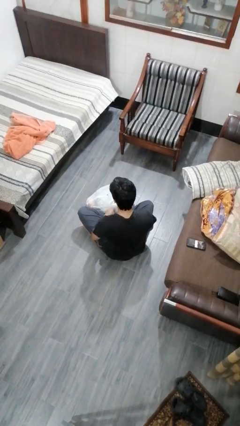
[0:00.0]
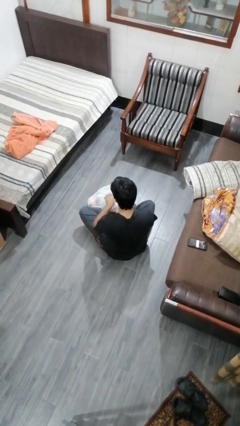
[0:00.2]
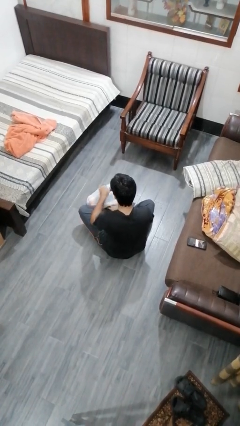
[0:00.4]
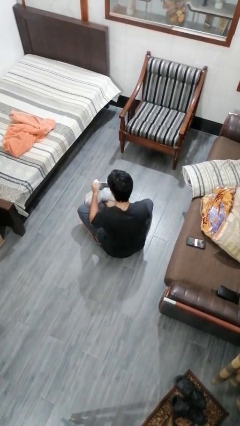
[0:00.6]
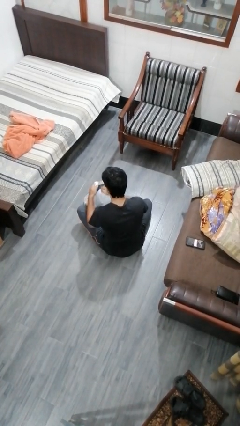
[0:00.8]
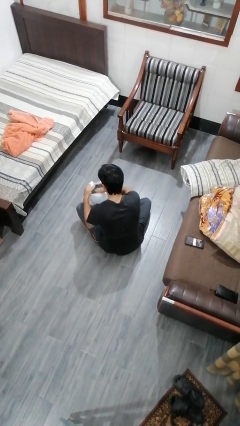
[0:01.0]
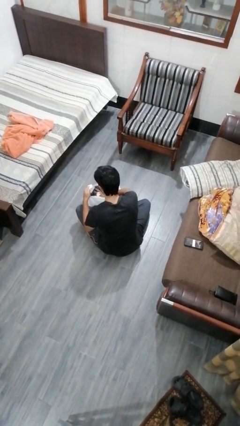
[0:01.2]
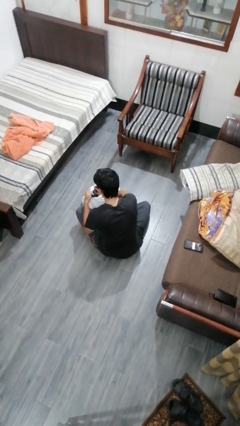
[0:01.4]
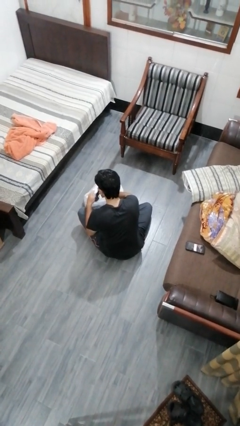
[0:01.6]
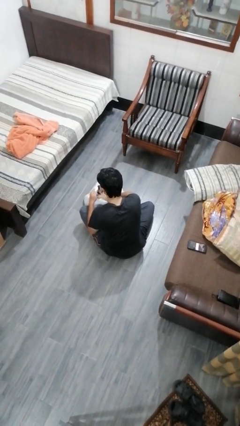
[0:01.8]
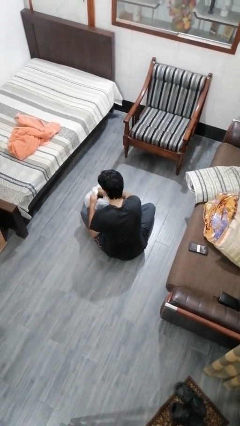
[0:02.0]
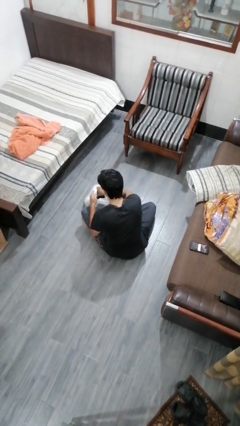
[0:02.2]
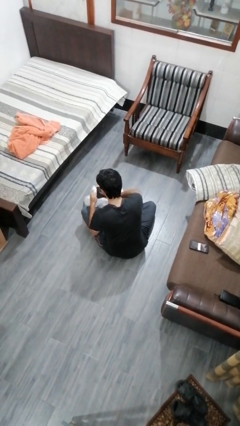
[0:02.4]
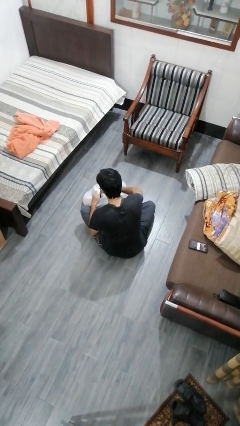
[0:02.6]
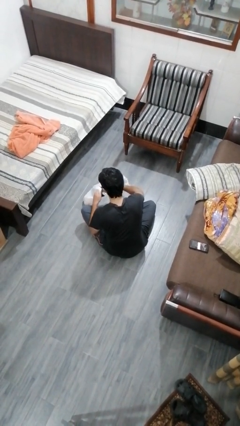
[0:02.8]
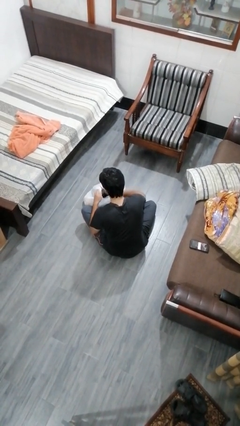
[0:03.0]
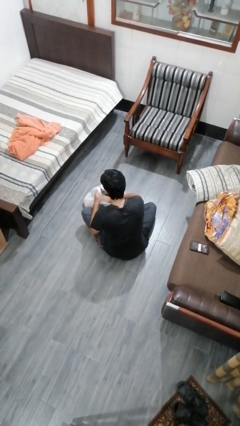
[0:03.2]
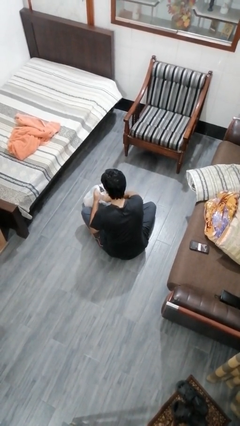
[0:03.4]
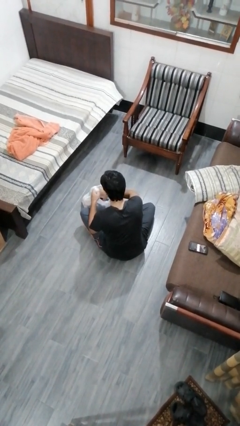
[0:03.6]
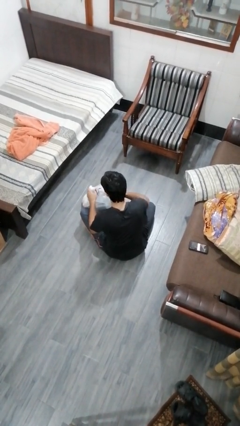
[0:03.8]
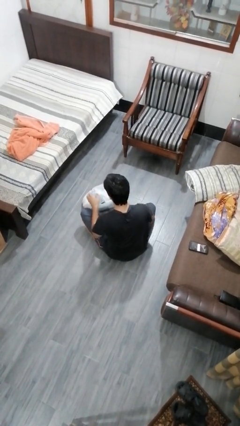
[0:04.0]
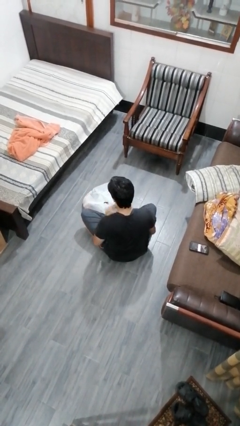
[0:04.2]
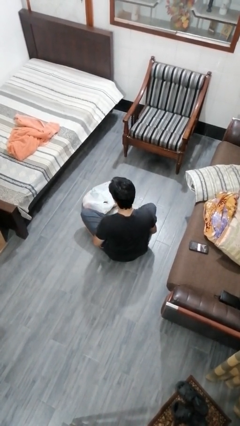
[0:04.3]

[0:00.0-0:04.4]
person searches in bag

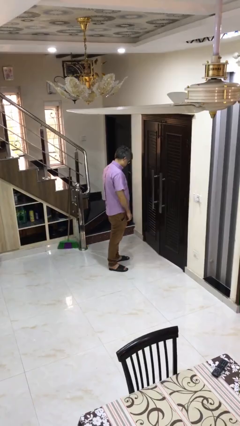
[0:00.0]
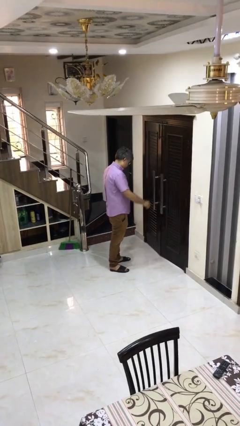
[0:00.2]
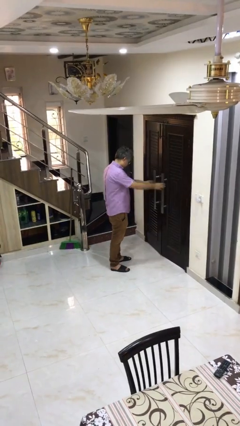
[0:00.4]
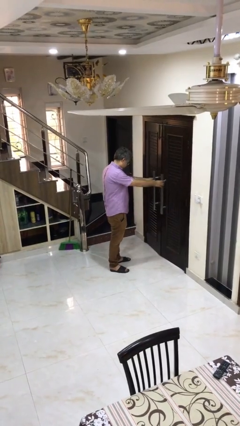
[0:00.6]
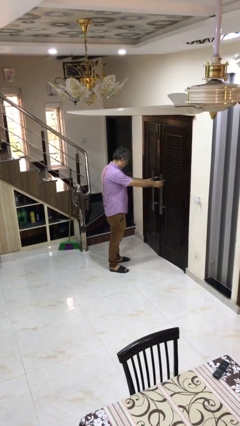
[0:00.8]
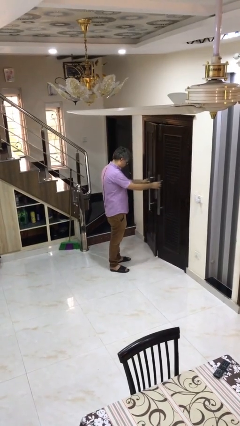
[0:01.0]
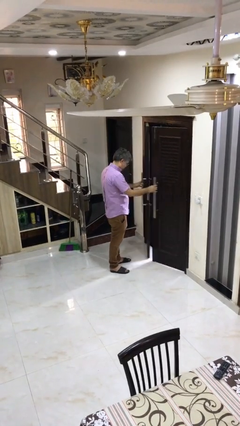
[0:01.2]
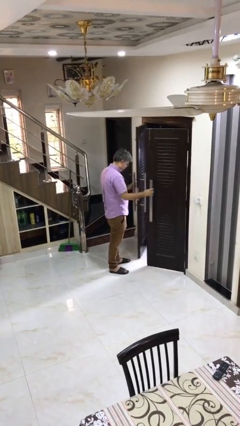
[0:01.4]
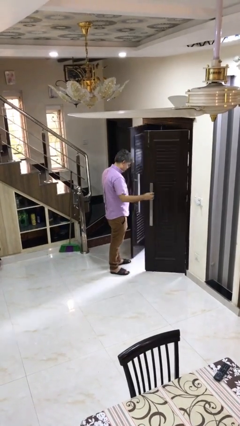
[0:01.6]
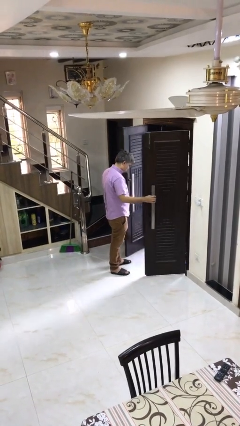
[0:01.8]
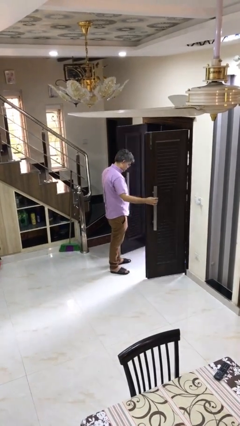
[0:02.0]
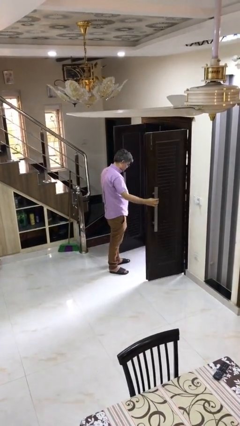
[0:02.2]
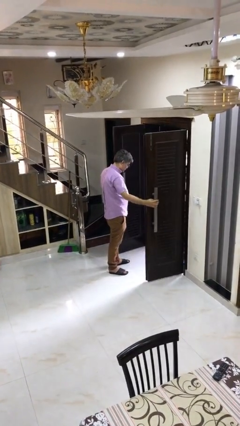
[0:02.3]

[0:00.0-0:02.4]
person opens facility door

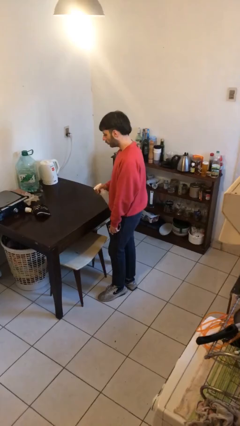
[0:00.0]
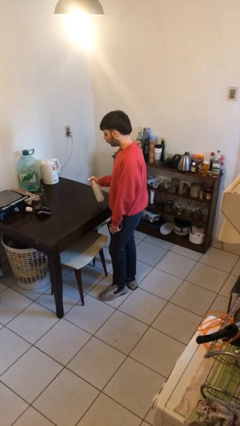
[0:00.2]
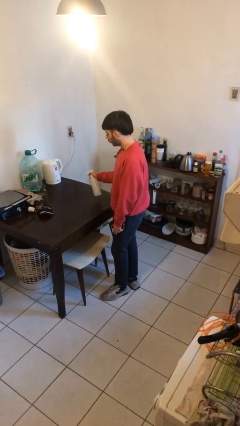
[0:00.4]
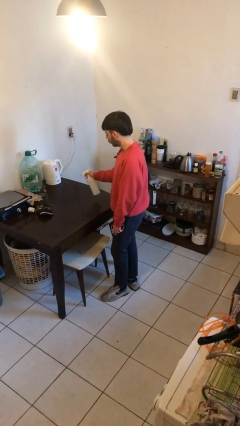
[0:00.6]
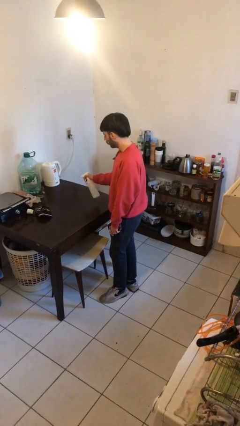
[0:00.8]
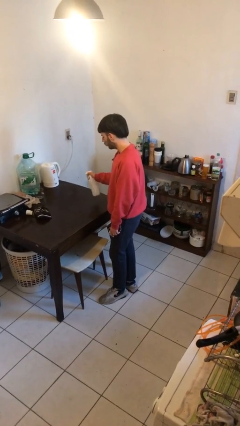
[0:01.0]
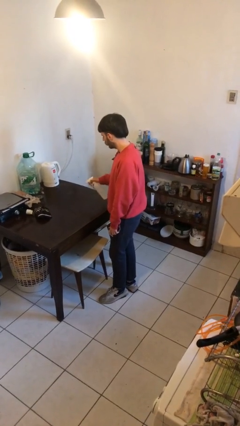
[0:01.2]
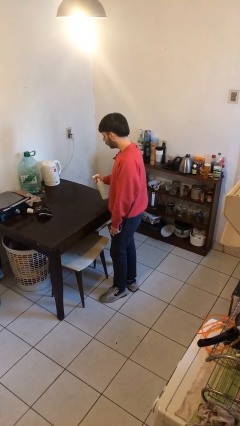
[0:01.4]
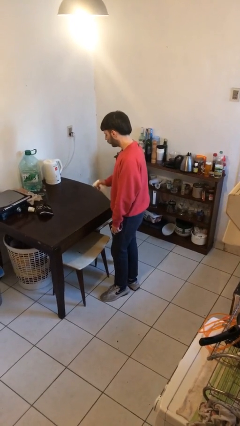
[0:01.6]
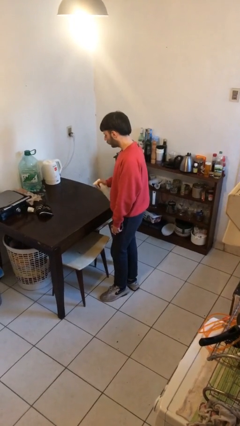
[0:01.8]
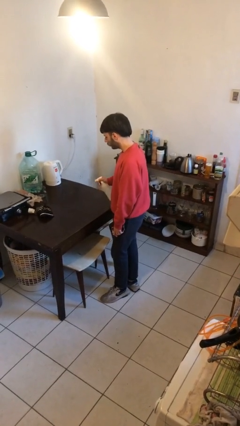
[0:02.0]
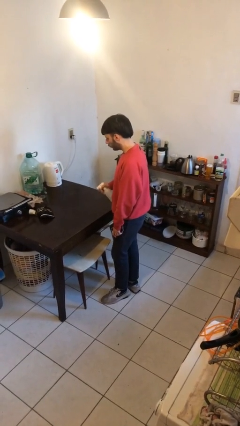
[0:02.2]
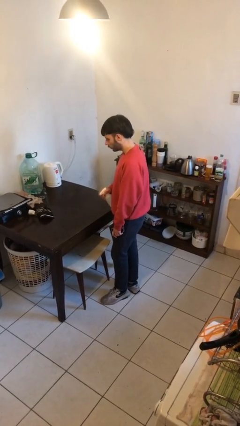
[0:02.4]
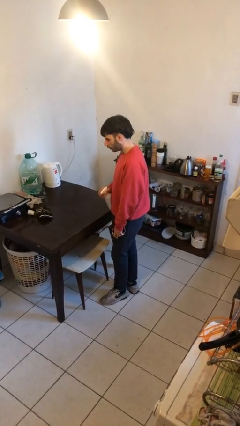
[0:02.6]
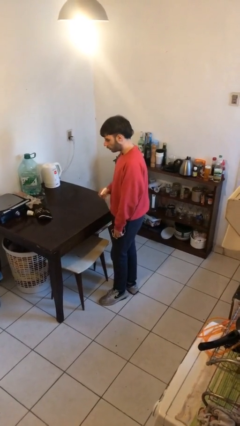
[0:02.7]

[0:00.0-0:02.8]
person sprays from bottle

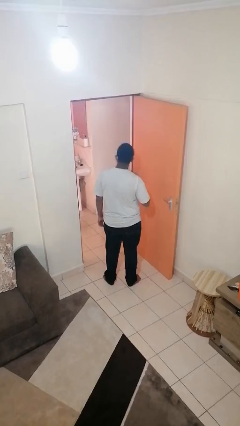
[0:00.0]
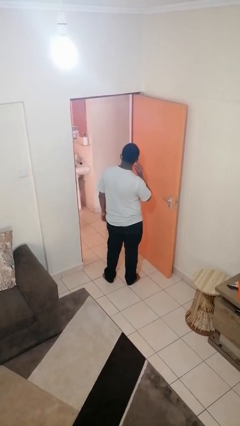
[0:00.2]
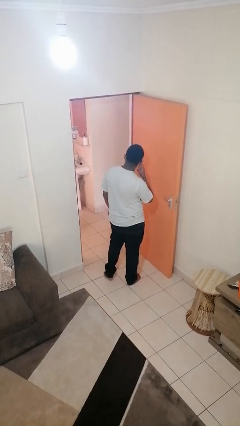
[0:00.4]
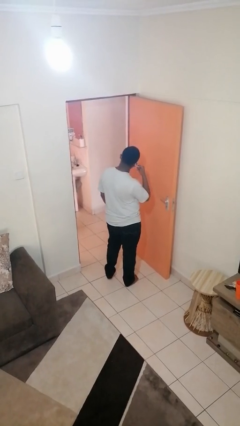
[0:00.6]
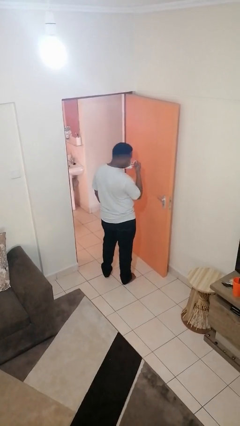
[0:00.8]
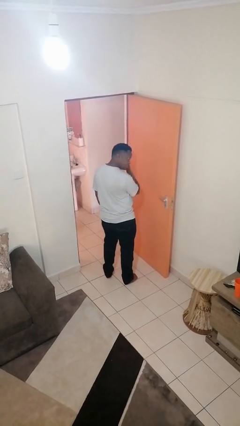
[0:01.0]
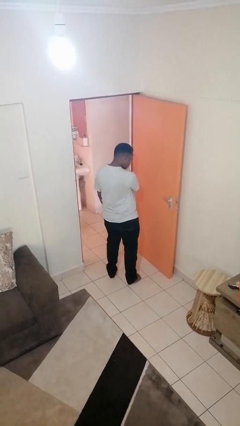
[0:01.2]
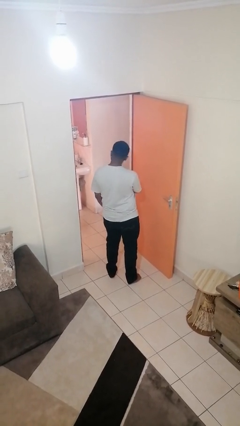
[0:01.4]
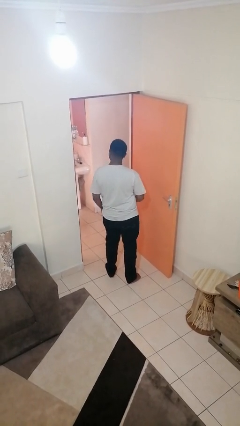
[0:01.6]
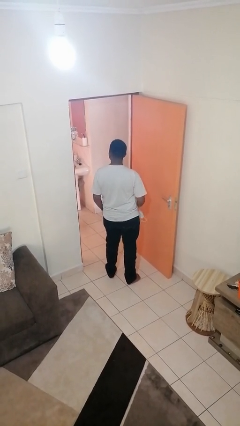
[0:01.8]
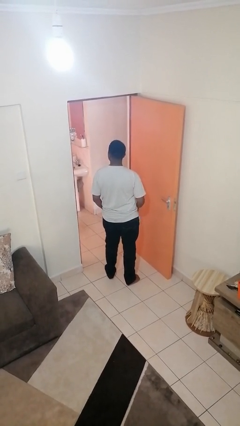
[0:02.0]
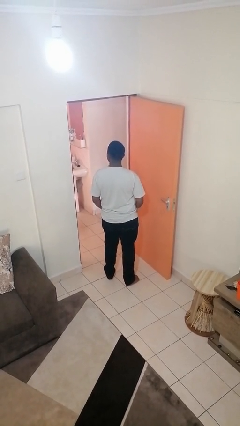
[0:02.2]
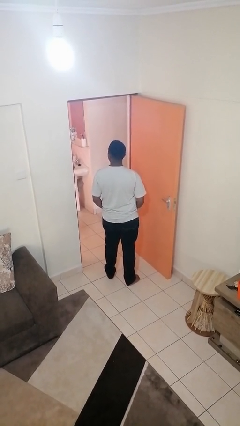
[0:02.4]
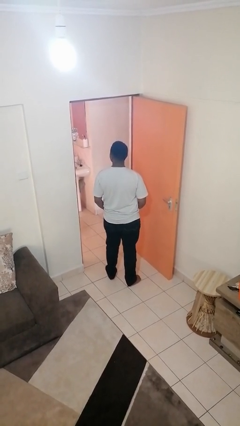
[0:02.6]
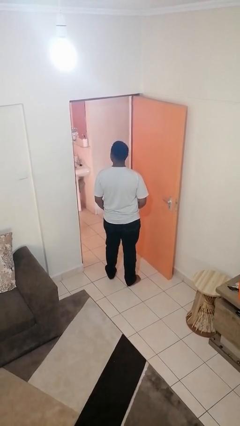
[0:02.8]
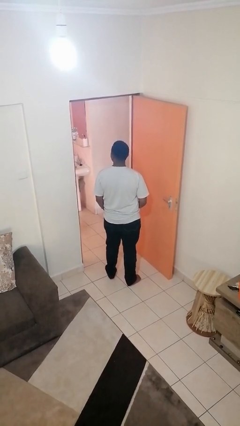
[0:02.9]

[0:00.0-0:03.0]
person takes off facemask

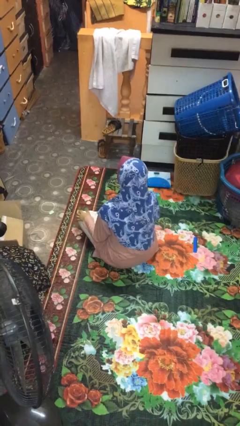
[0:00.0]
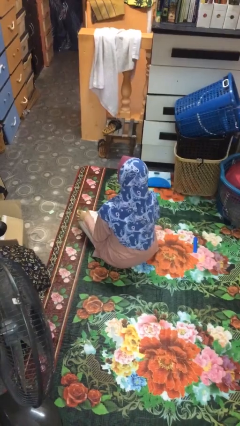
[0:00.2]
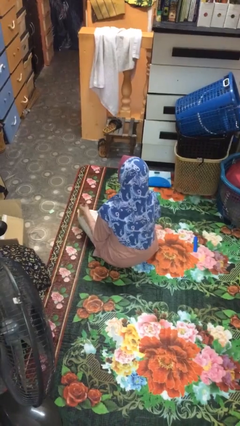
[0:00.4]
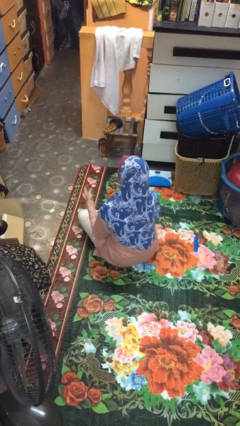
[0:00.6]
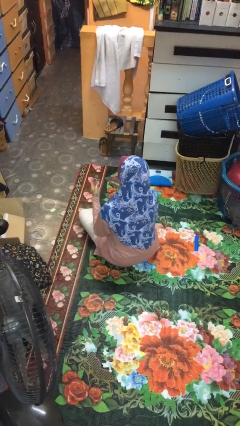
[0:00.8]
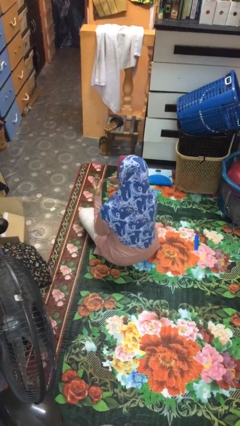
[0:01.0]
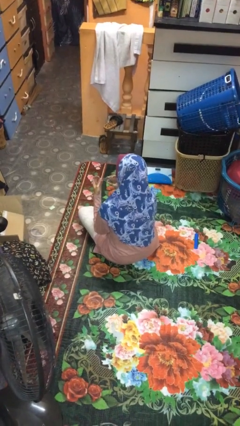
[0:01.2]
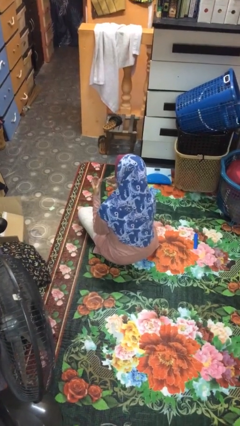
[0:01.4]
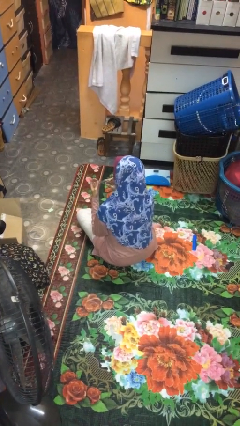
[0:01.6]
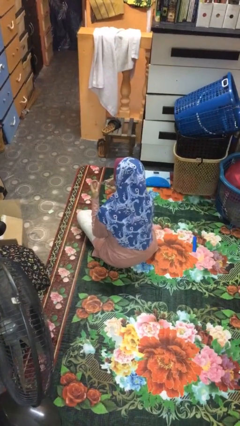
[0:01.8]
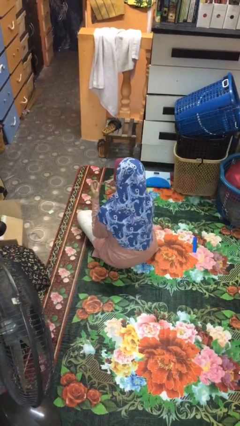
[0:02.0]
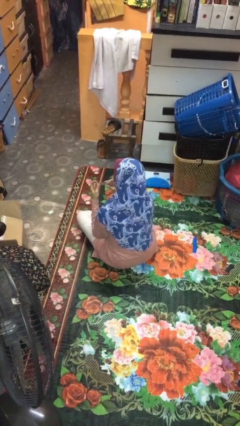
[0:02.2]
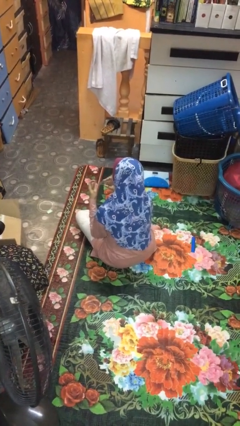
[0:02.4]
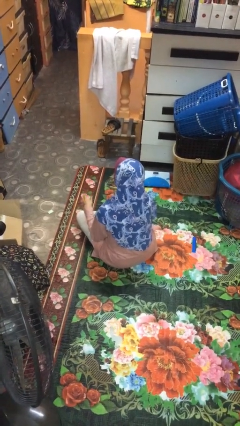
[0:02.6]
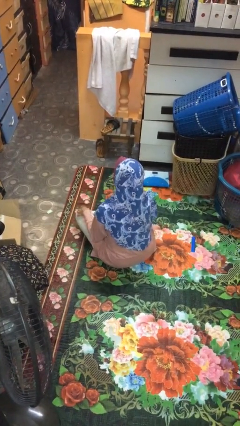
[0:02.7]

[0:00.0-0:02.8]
person clips fingernails

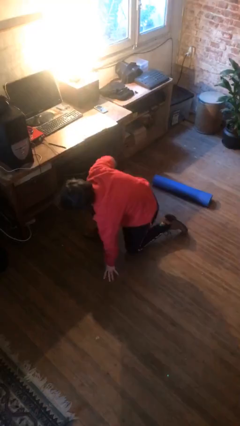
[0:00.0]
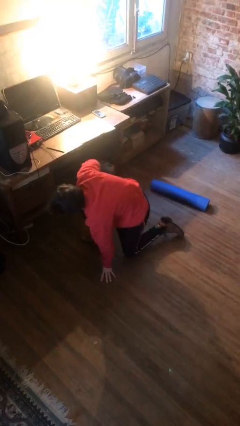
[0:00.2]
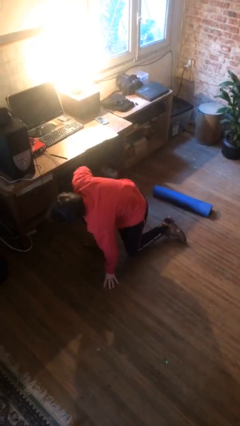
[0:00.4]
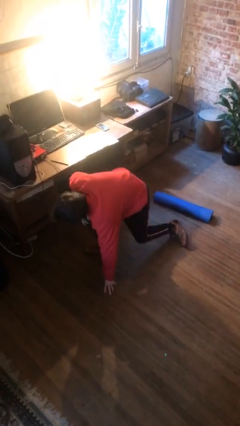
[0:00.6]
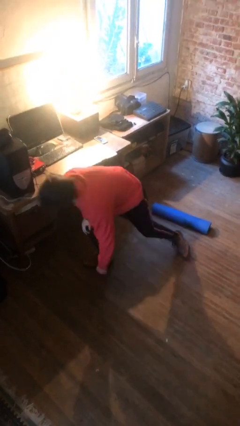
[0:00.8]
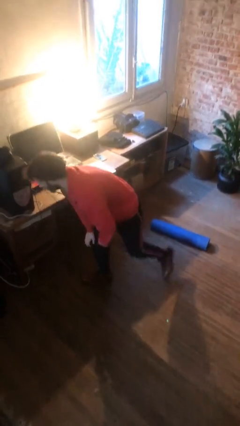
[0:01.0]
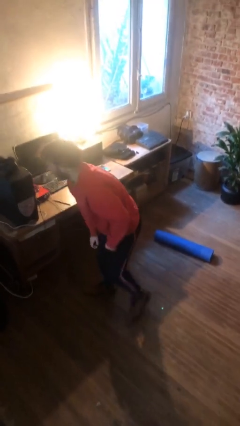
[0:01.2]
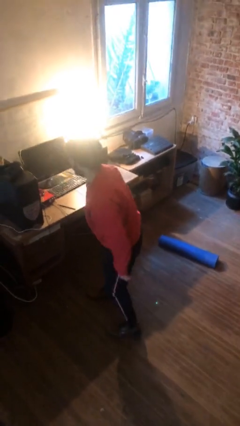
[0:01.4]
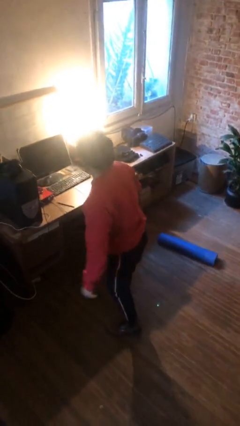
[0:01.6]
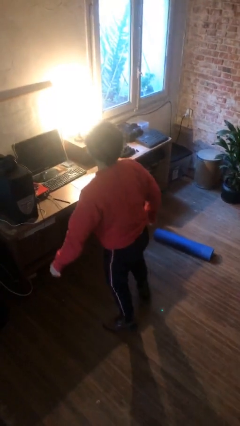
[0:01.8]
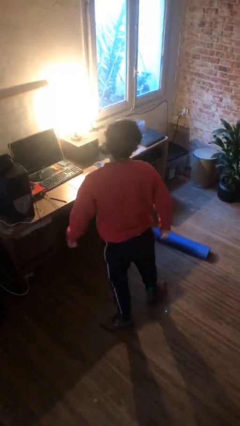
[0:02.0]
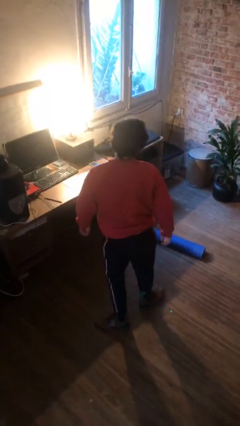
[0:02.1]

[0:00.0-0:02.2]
person stands up from floor
